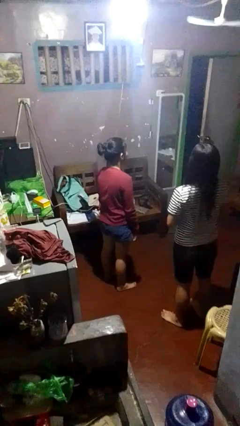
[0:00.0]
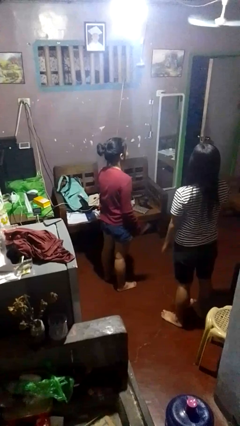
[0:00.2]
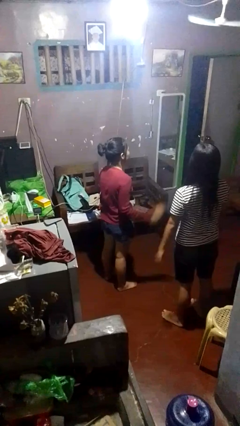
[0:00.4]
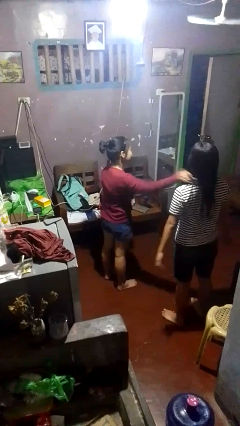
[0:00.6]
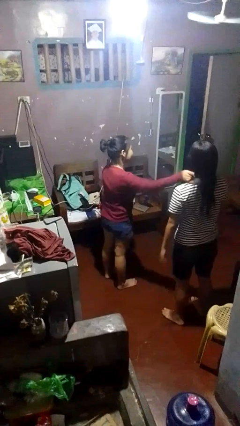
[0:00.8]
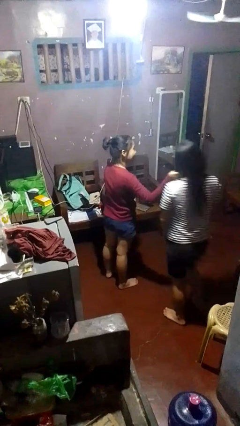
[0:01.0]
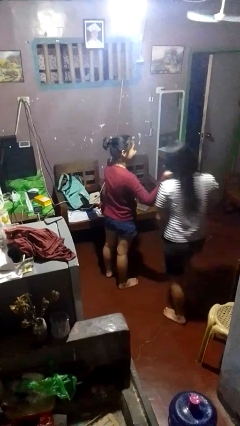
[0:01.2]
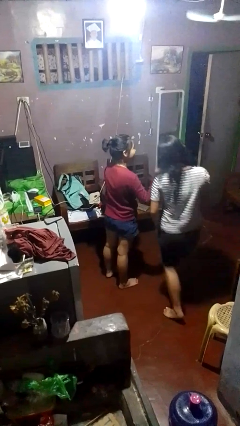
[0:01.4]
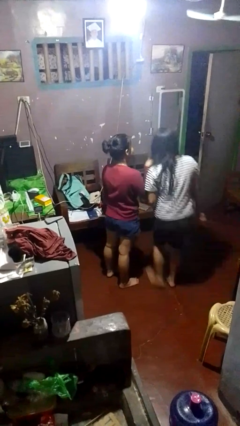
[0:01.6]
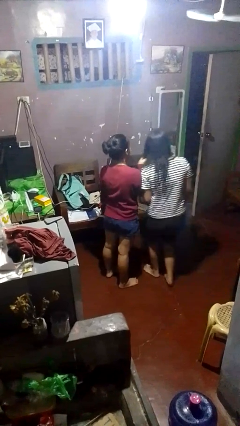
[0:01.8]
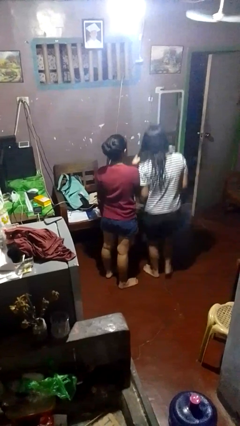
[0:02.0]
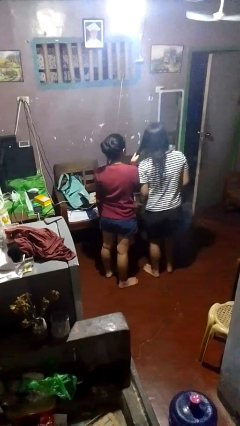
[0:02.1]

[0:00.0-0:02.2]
person grabs person by hair

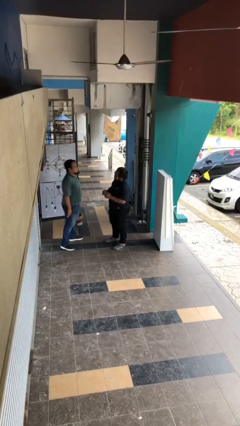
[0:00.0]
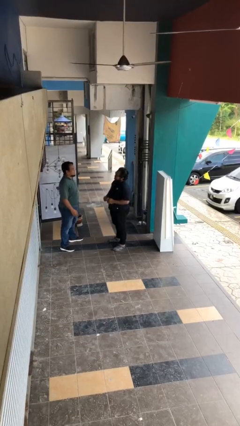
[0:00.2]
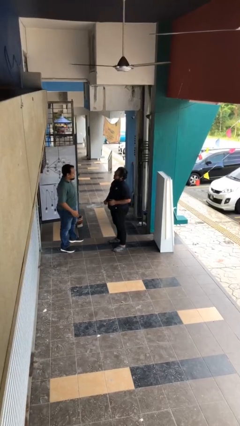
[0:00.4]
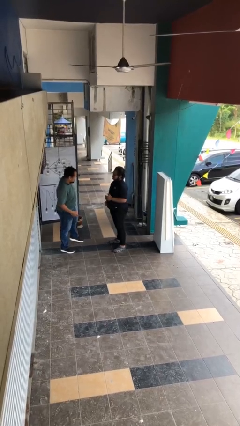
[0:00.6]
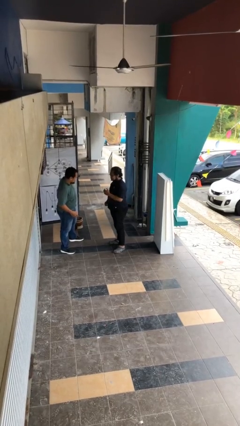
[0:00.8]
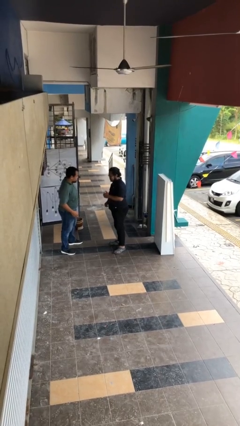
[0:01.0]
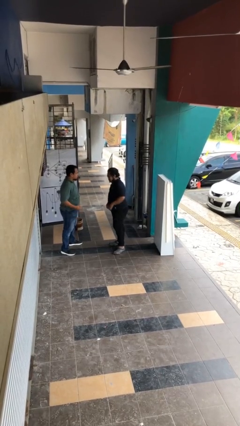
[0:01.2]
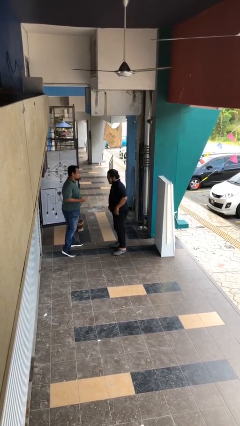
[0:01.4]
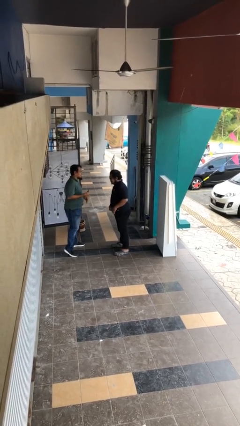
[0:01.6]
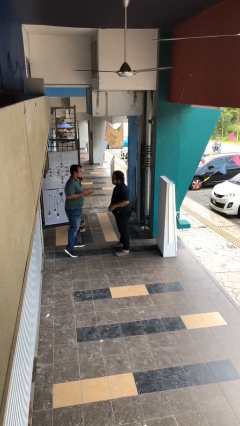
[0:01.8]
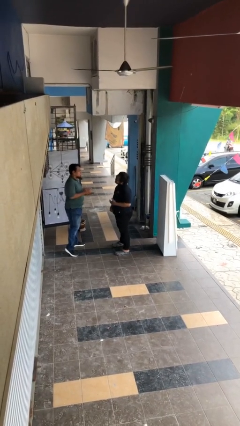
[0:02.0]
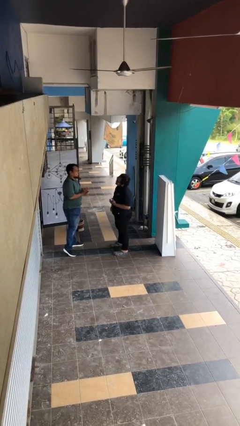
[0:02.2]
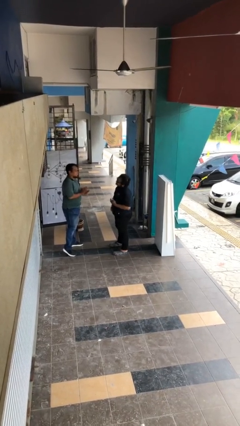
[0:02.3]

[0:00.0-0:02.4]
person talks to person

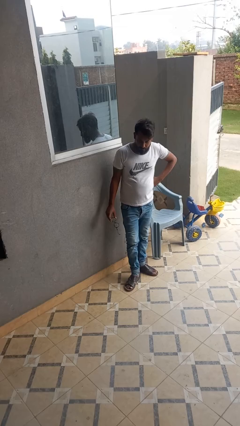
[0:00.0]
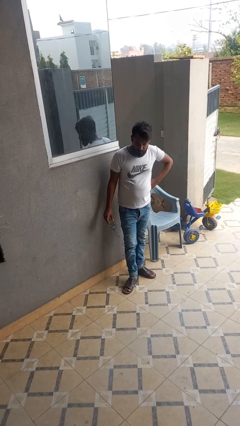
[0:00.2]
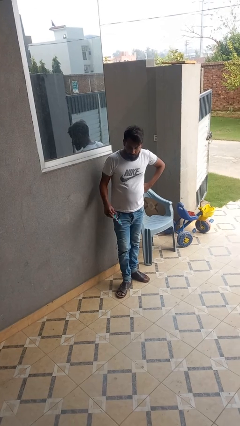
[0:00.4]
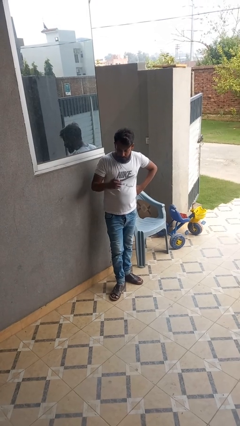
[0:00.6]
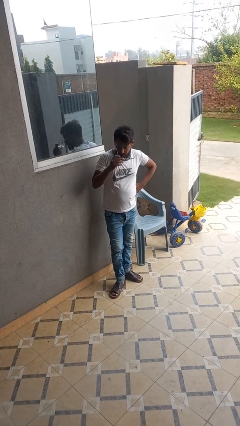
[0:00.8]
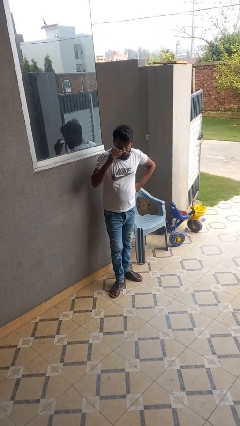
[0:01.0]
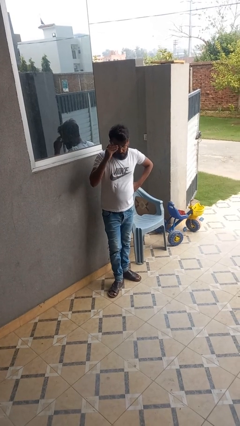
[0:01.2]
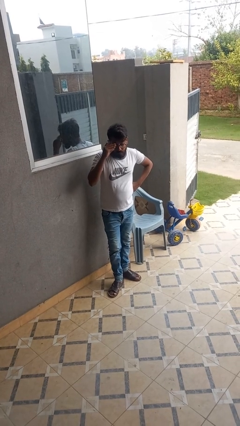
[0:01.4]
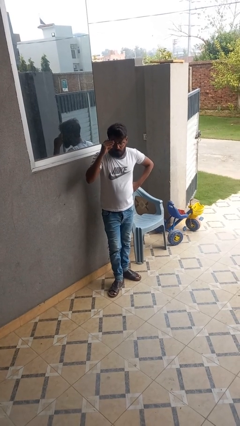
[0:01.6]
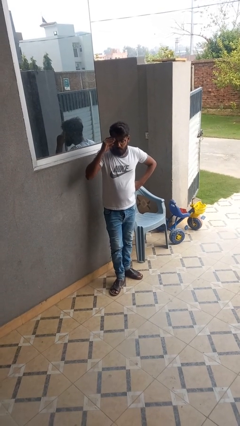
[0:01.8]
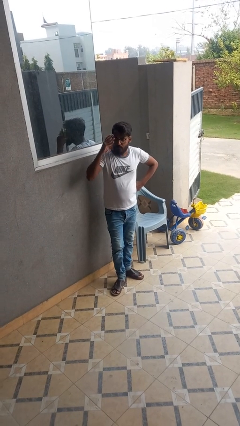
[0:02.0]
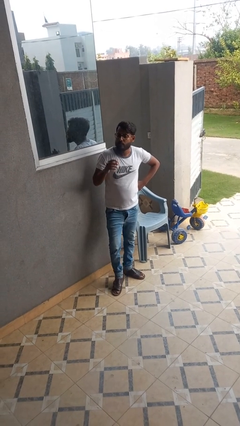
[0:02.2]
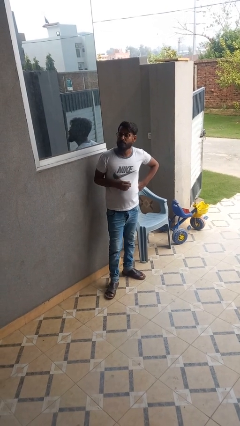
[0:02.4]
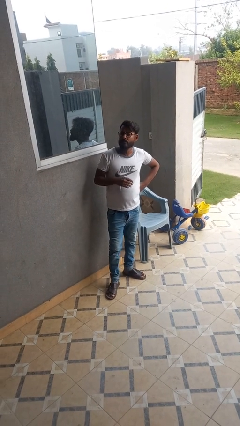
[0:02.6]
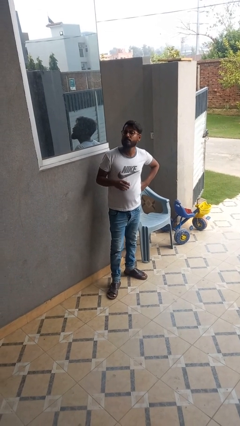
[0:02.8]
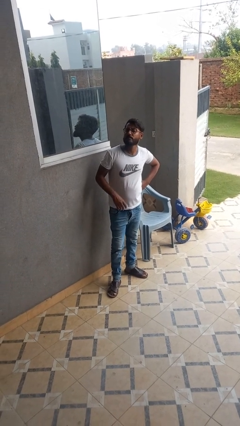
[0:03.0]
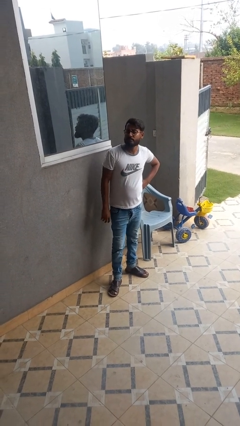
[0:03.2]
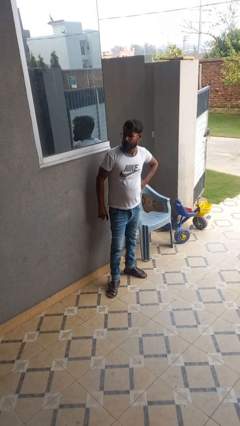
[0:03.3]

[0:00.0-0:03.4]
person puts on glasses

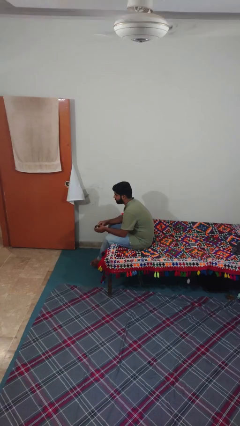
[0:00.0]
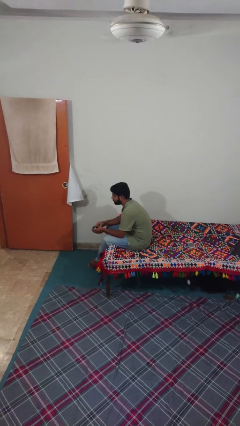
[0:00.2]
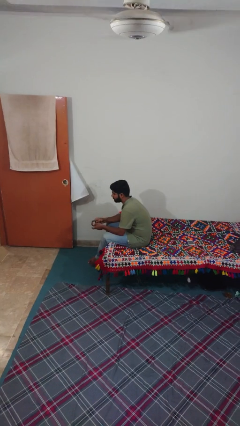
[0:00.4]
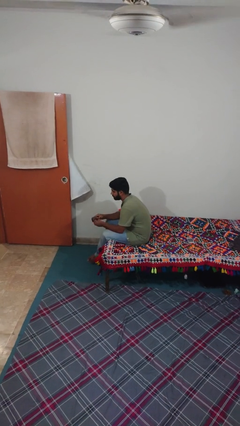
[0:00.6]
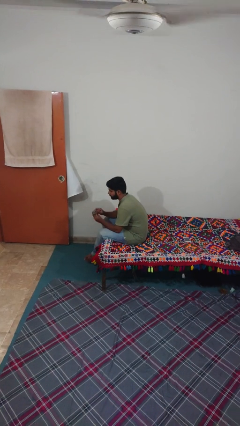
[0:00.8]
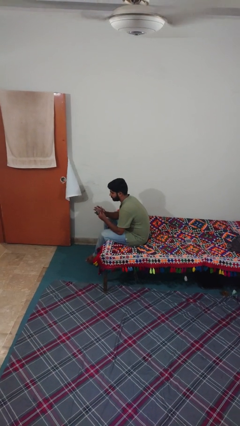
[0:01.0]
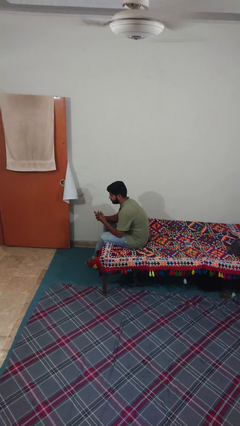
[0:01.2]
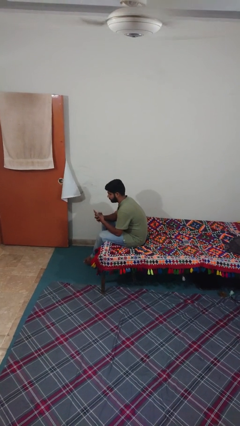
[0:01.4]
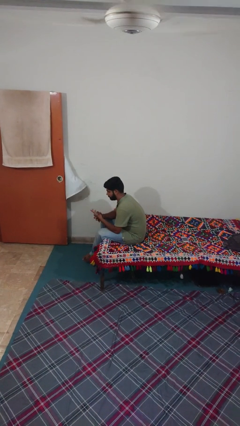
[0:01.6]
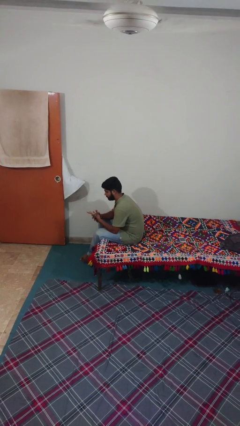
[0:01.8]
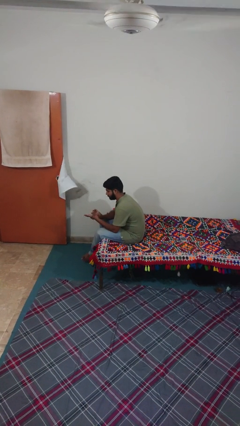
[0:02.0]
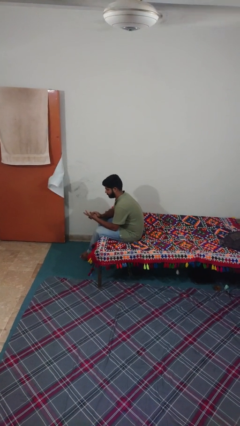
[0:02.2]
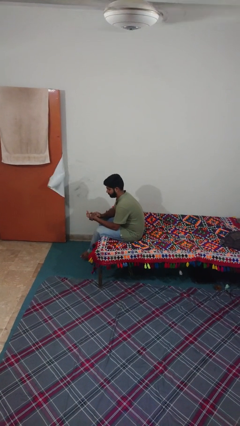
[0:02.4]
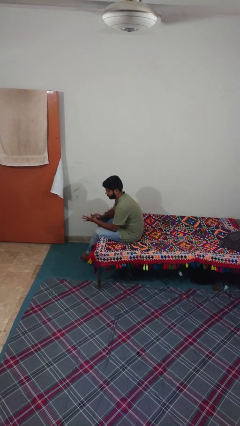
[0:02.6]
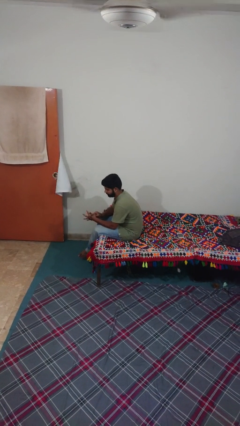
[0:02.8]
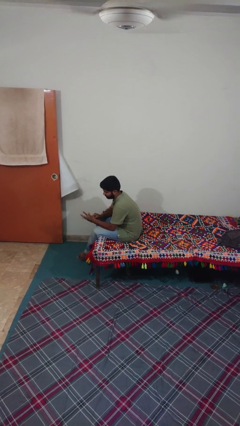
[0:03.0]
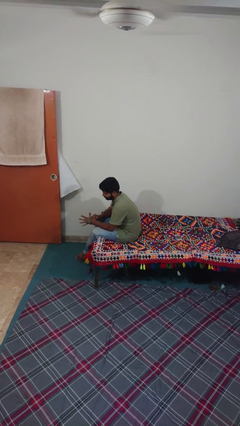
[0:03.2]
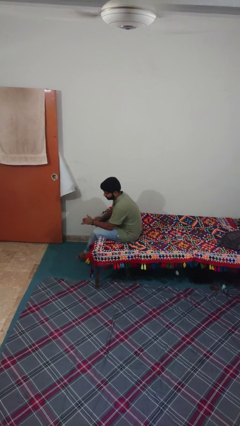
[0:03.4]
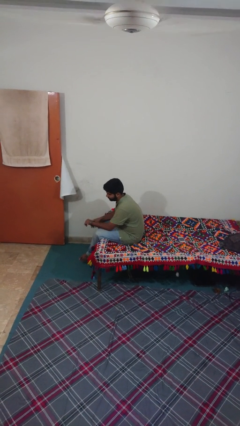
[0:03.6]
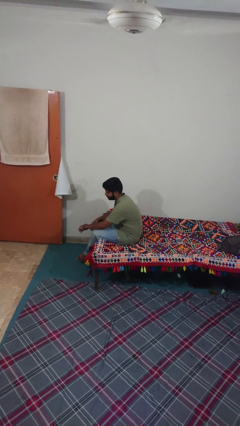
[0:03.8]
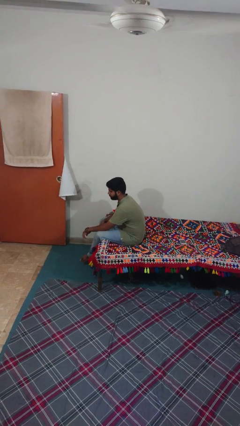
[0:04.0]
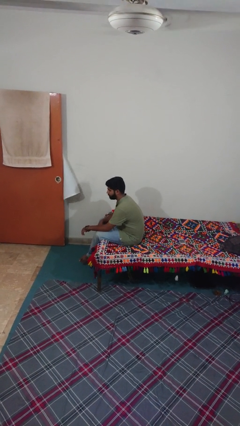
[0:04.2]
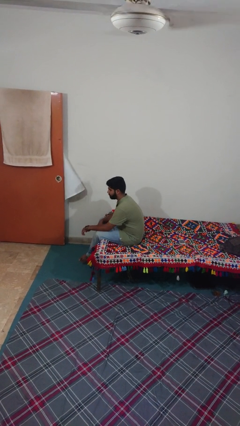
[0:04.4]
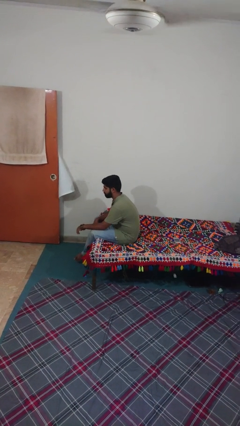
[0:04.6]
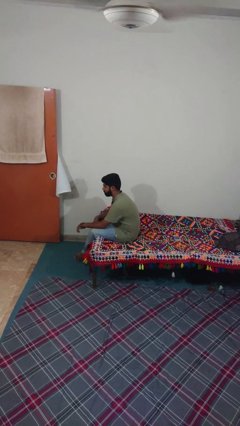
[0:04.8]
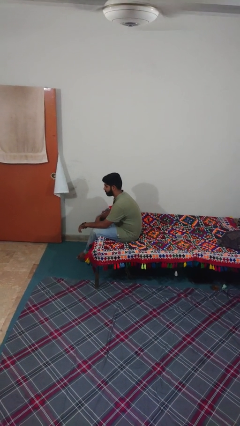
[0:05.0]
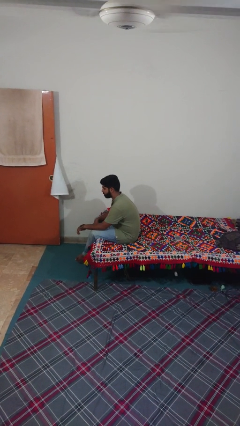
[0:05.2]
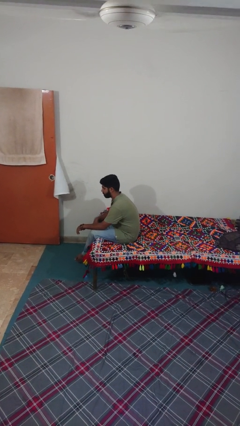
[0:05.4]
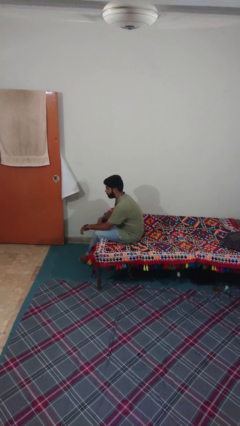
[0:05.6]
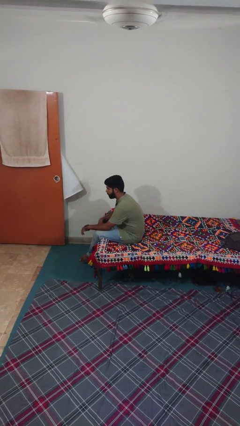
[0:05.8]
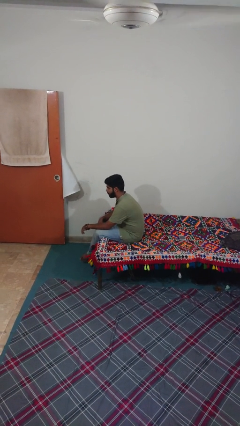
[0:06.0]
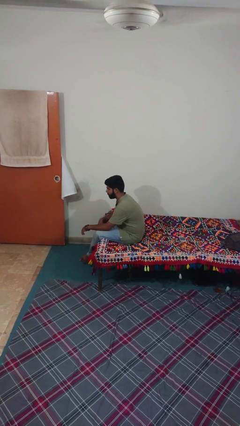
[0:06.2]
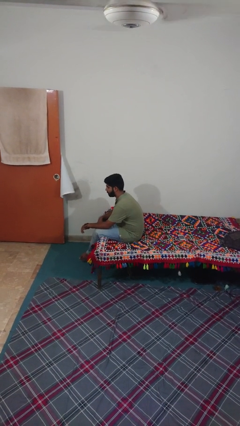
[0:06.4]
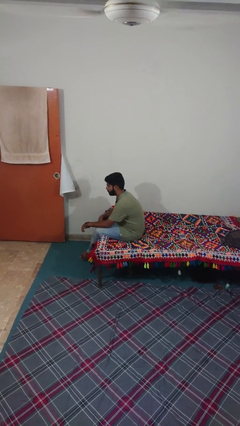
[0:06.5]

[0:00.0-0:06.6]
person puts on wristwatch

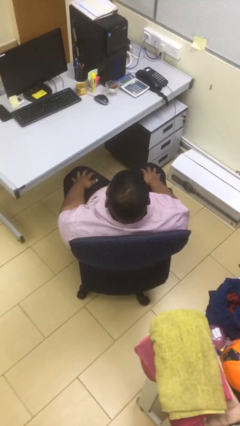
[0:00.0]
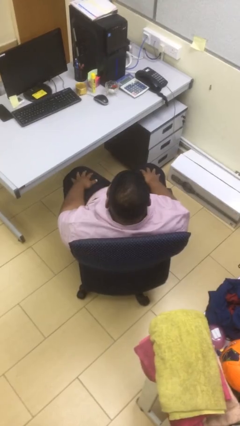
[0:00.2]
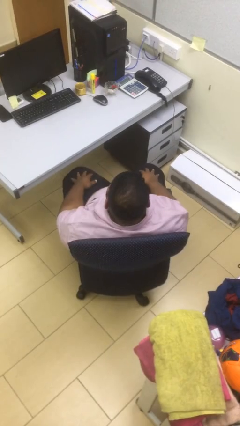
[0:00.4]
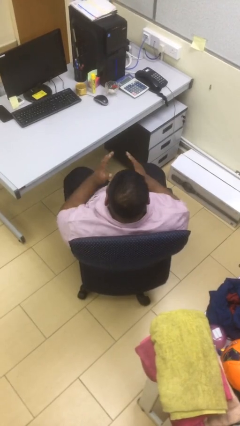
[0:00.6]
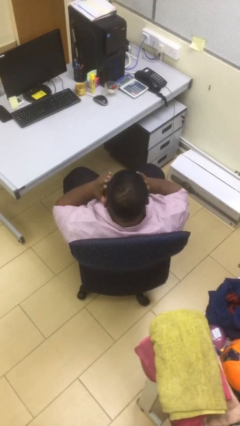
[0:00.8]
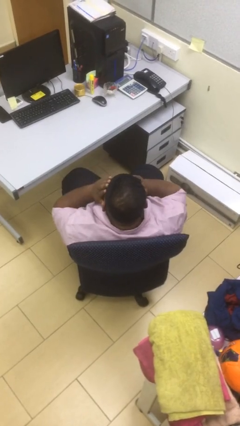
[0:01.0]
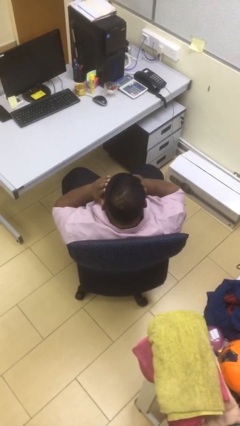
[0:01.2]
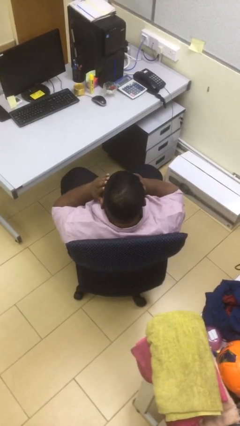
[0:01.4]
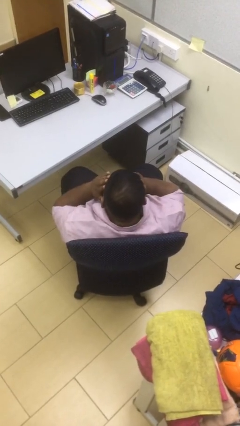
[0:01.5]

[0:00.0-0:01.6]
person covers face with hands

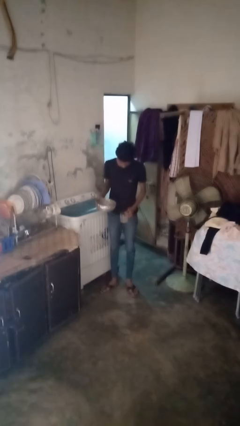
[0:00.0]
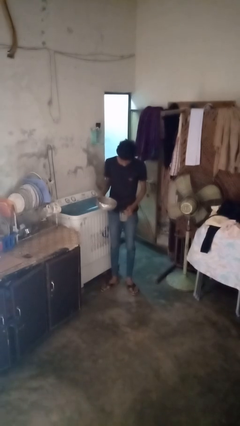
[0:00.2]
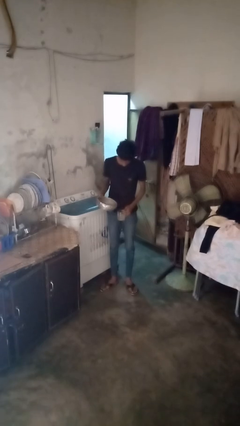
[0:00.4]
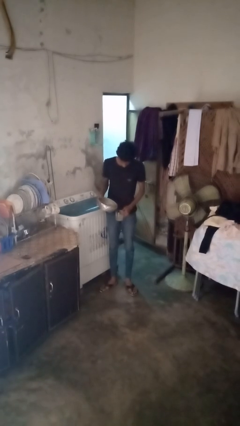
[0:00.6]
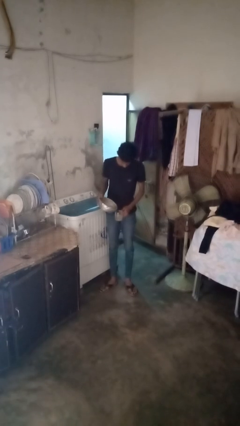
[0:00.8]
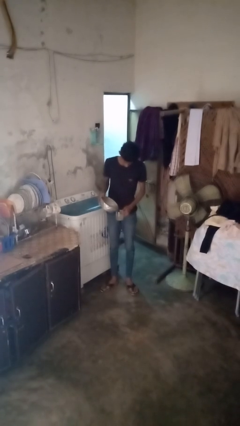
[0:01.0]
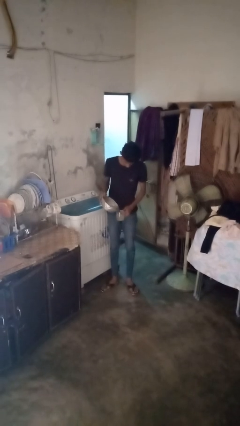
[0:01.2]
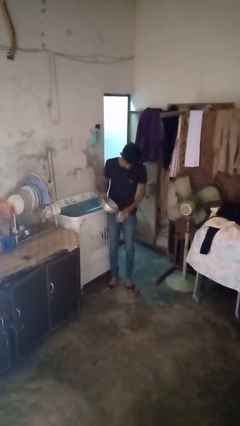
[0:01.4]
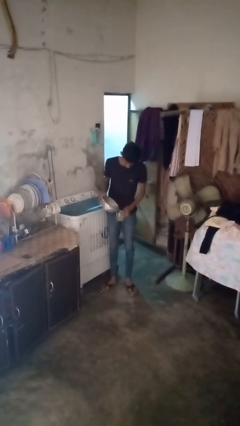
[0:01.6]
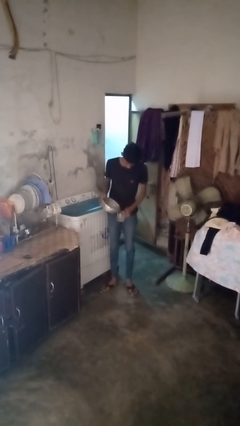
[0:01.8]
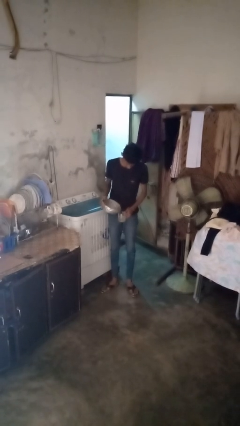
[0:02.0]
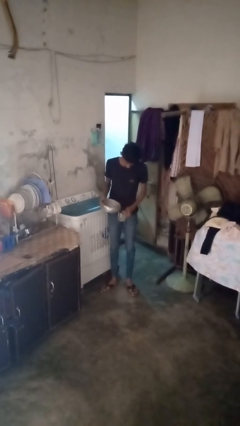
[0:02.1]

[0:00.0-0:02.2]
person pours liquid into cup
